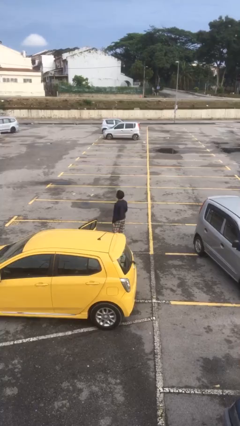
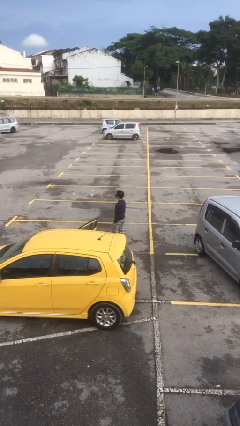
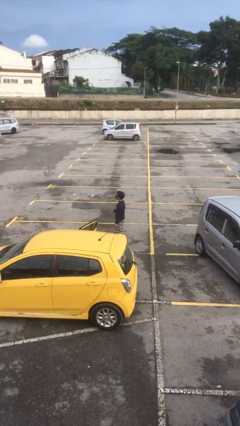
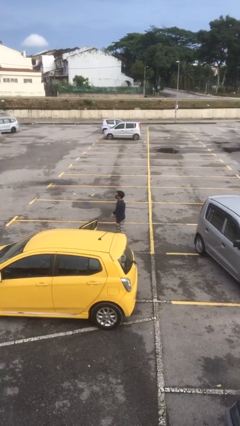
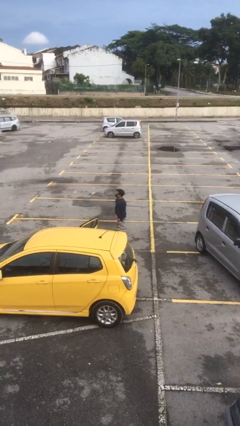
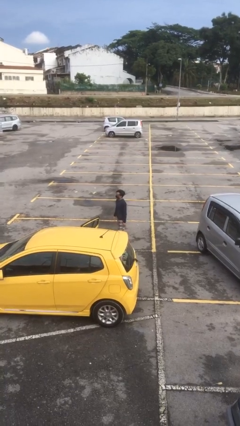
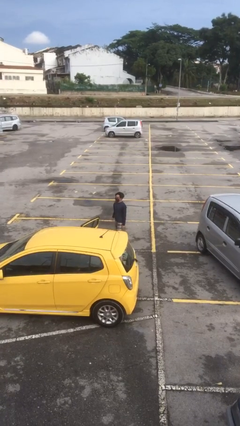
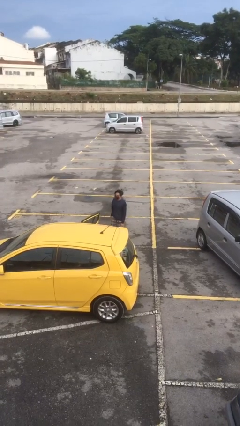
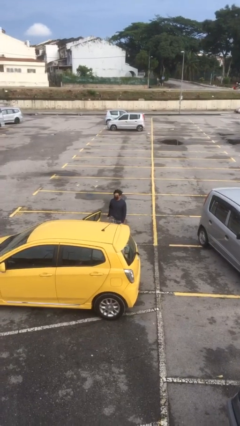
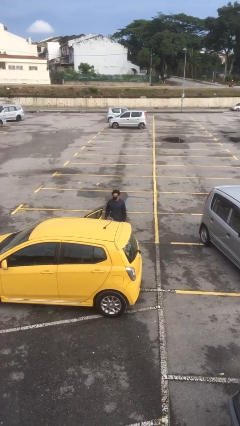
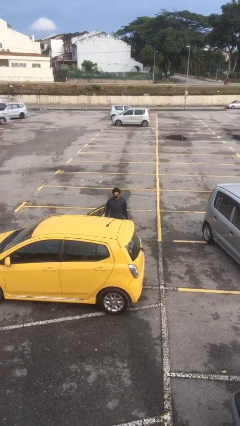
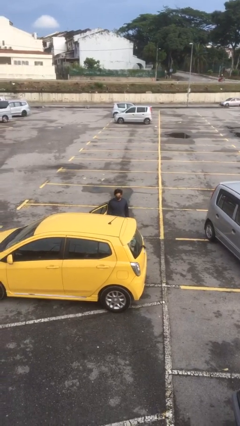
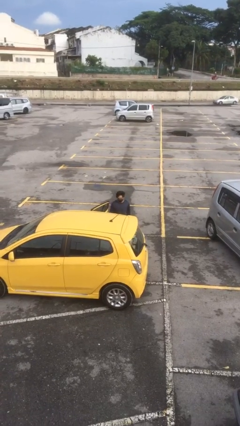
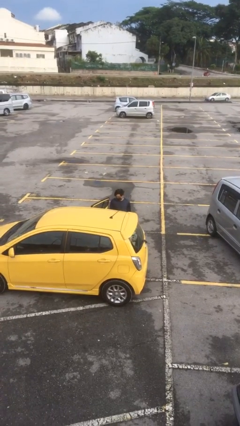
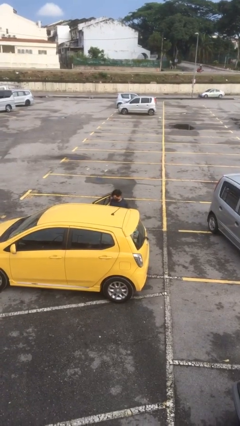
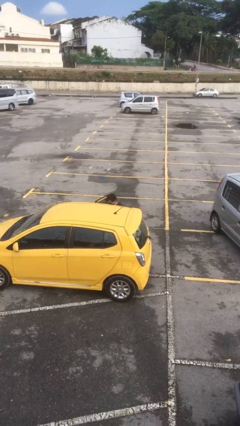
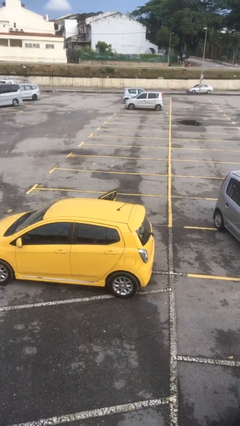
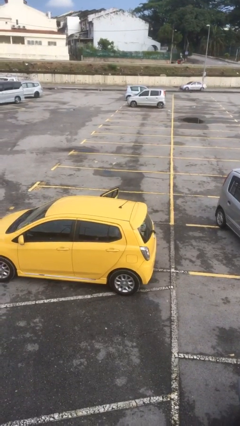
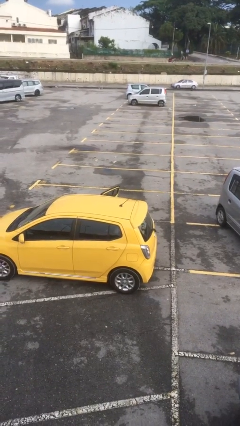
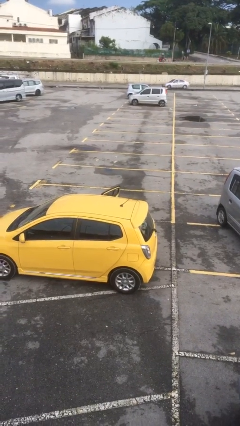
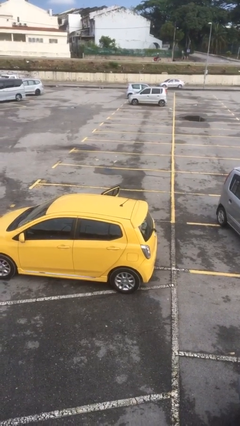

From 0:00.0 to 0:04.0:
person enters car

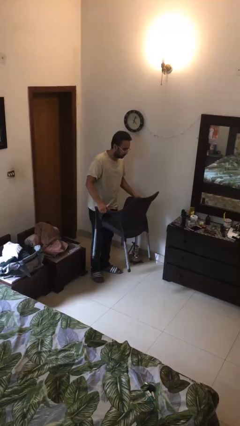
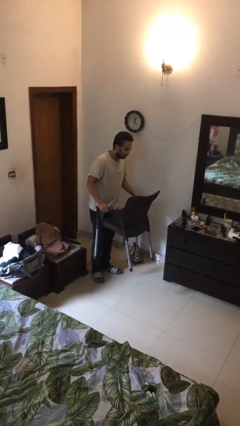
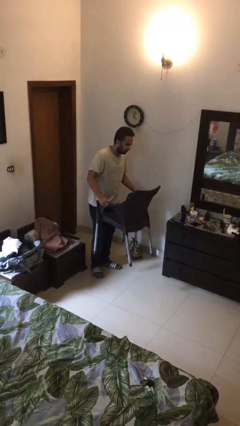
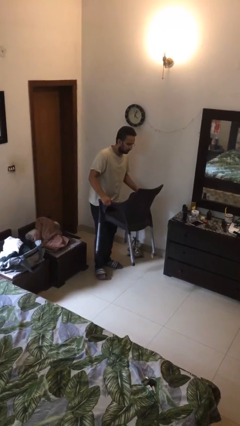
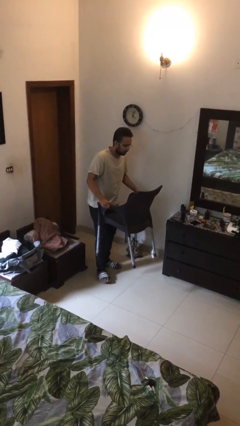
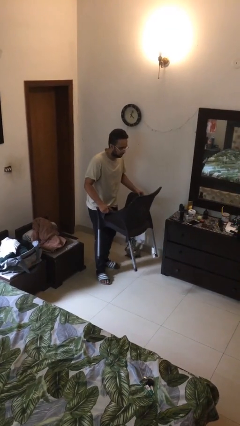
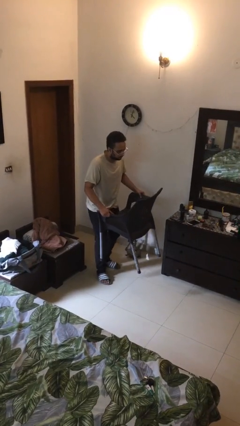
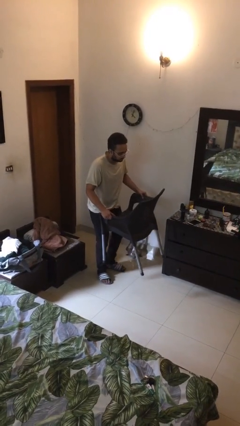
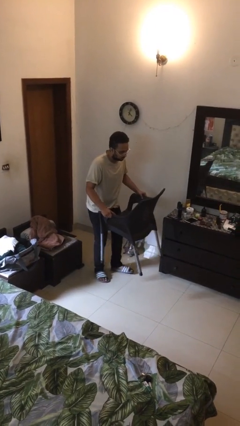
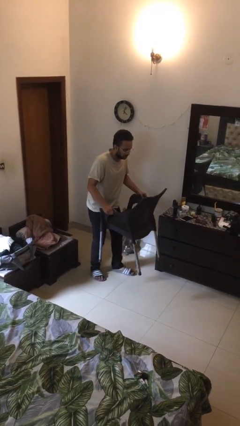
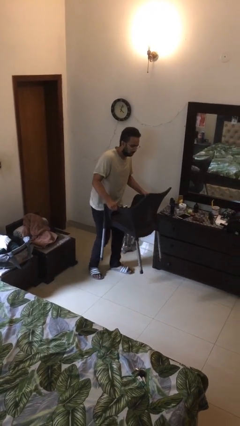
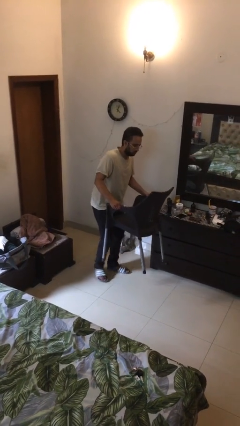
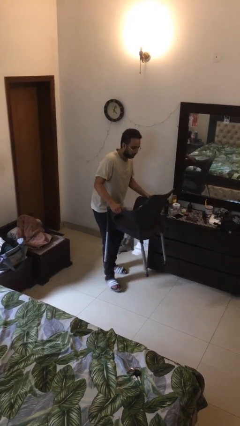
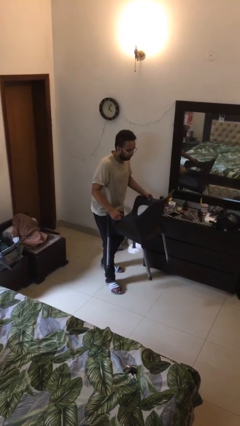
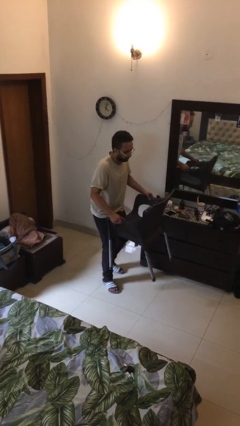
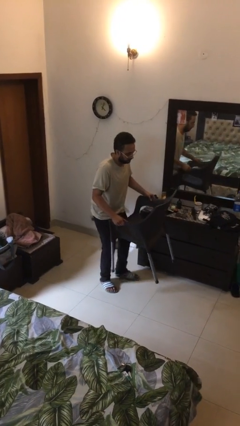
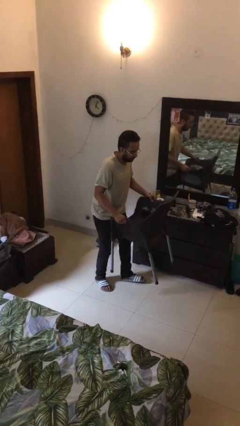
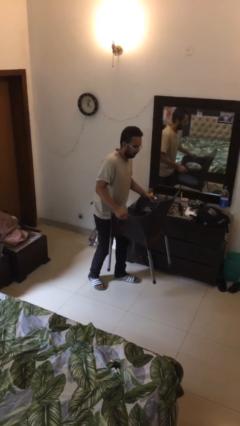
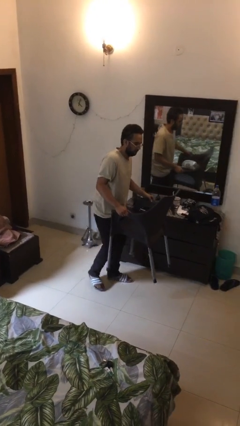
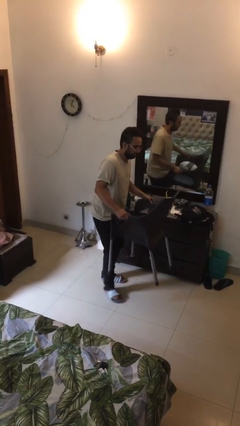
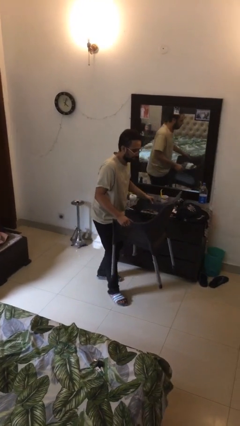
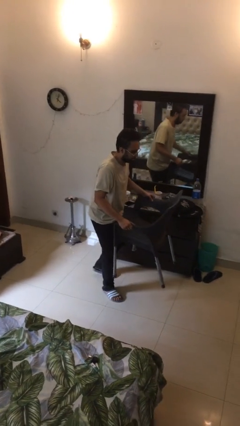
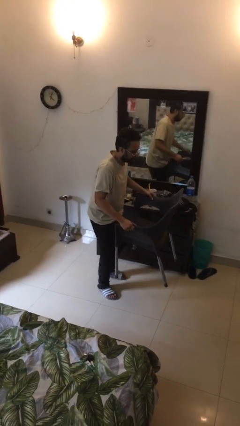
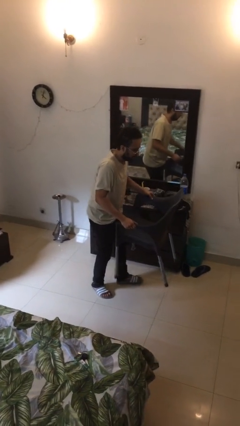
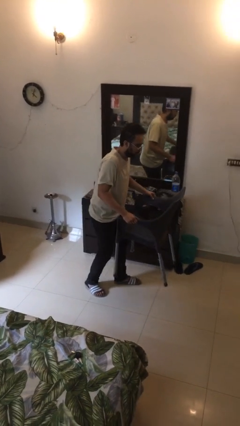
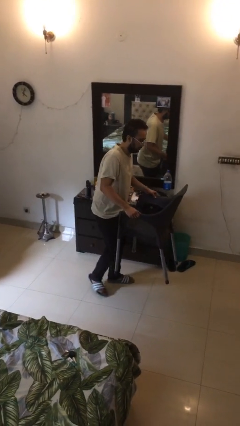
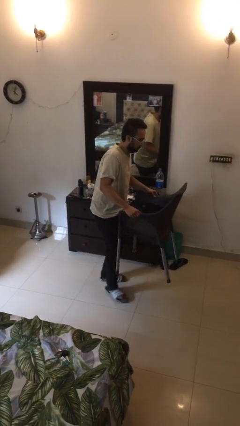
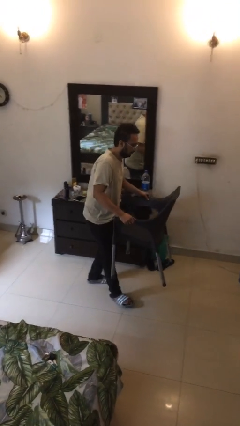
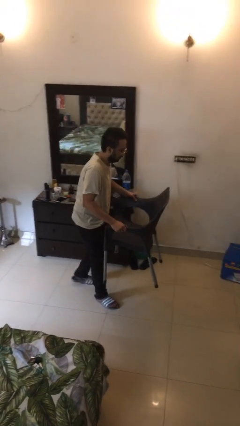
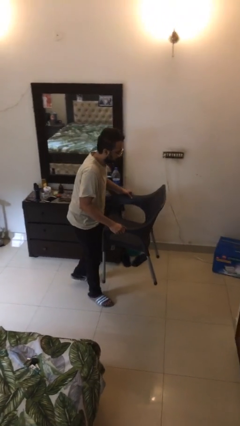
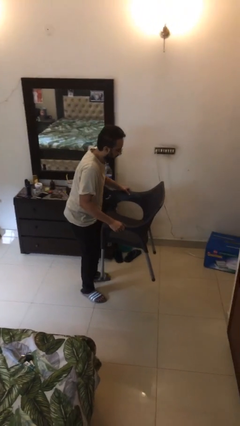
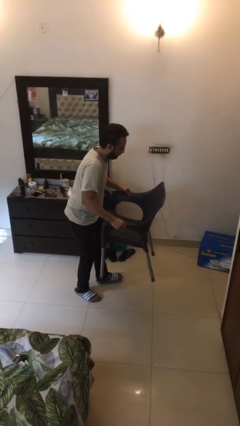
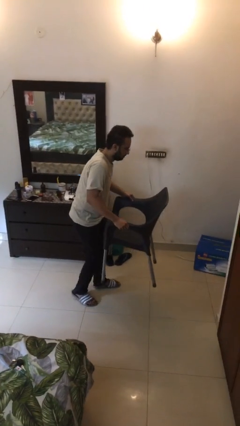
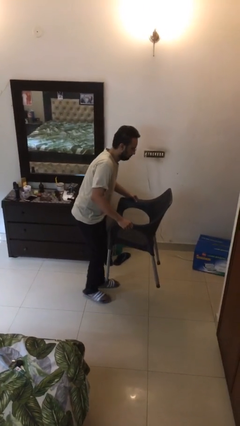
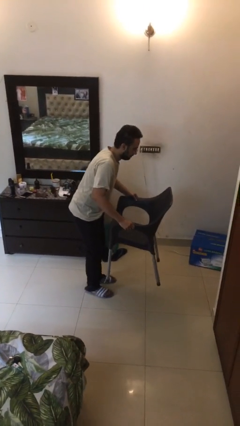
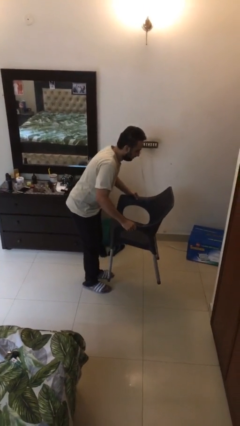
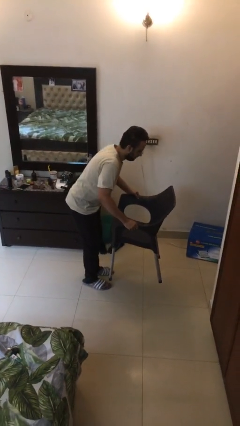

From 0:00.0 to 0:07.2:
person carries heavy object

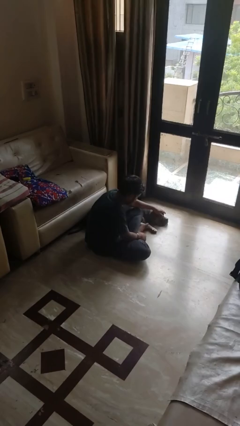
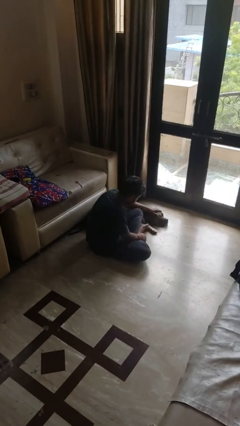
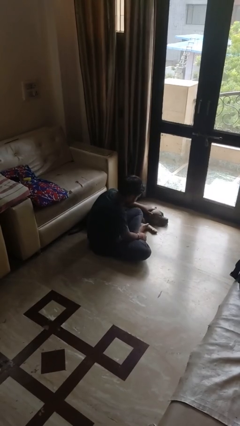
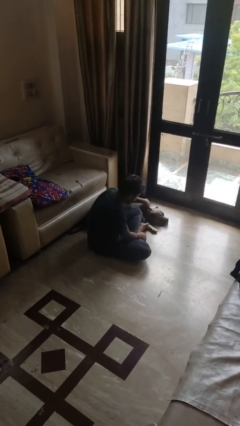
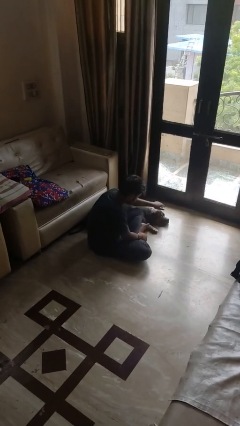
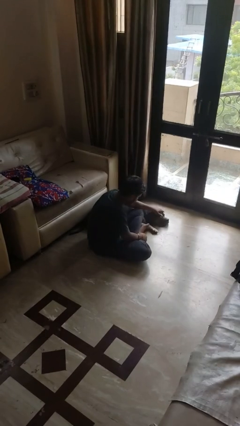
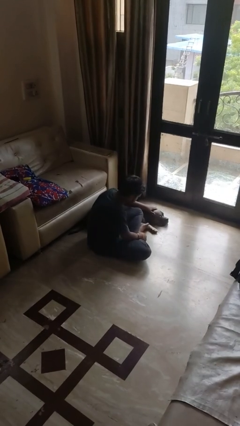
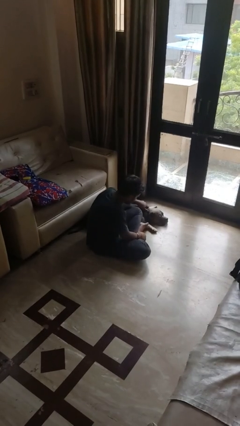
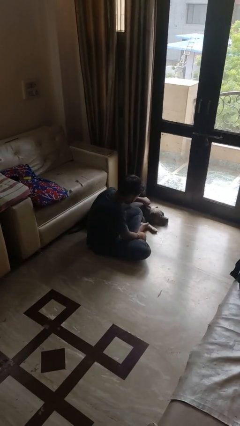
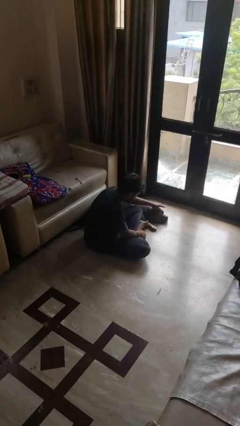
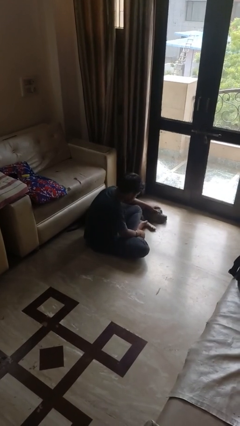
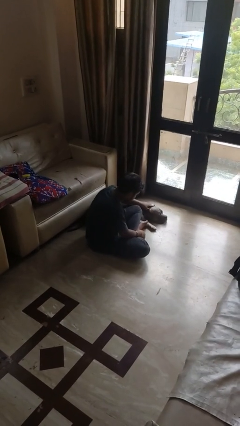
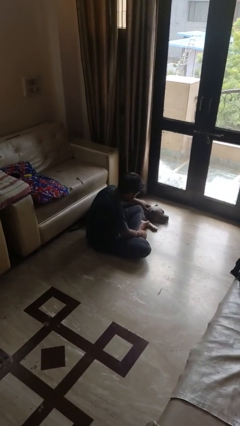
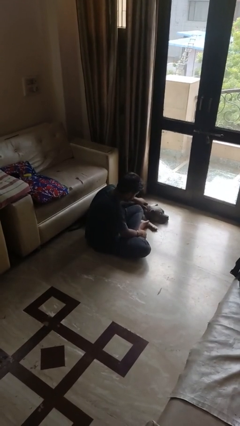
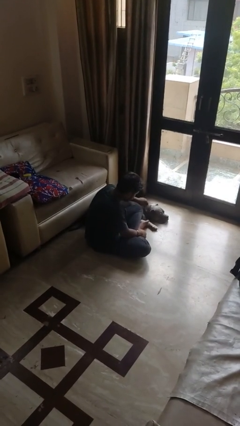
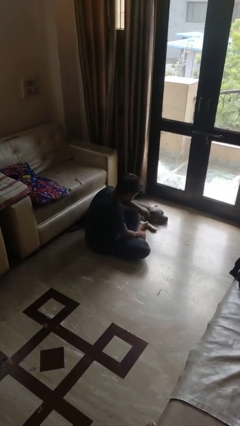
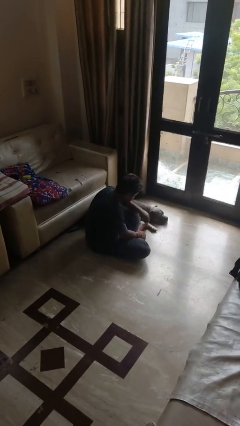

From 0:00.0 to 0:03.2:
person pets dog

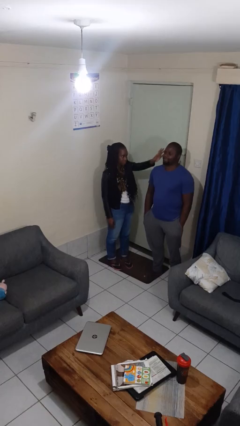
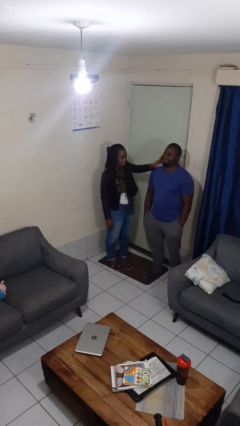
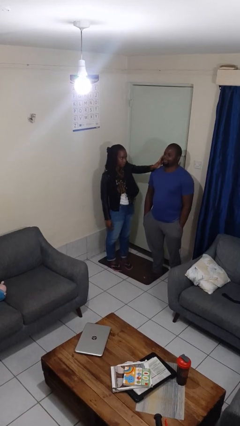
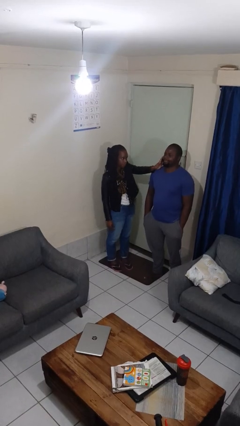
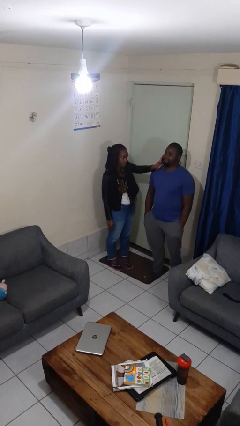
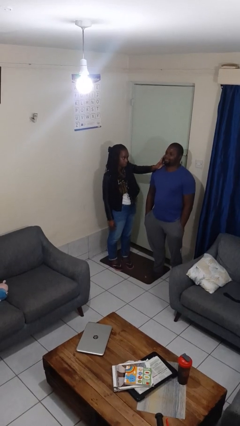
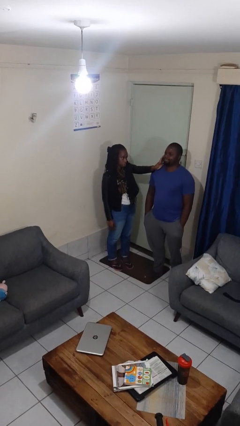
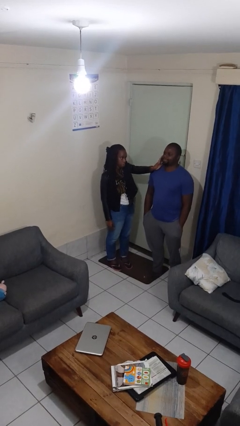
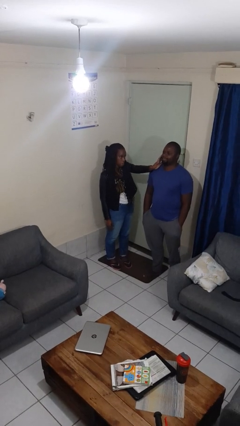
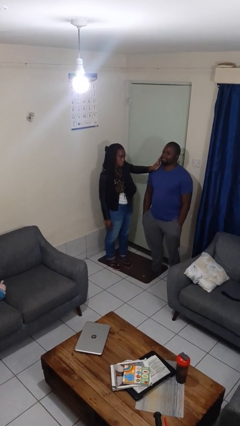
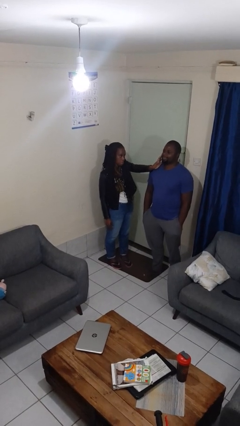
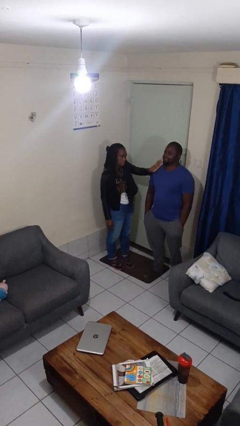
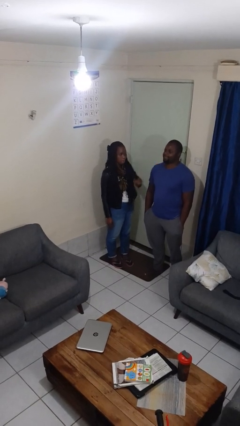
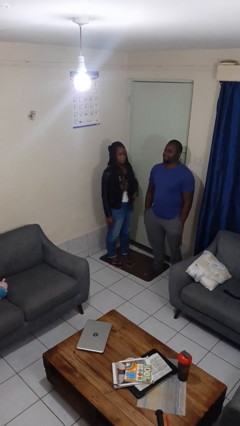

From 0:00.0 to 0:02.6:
person touches face of person

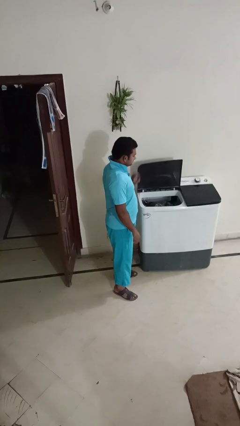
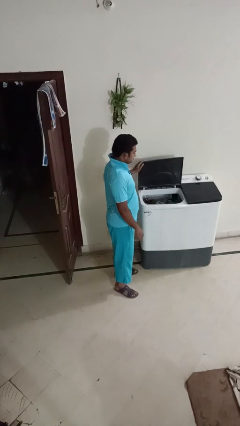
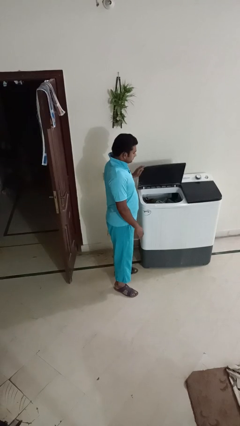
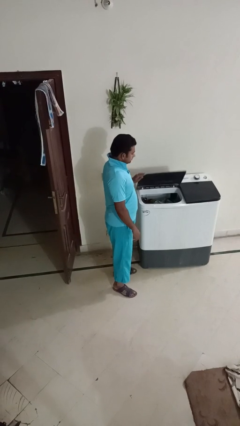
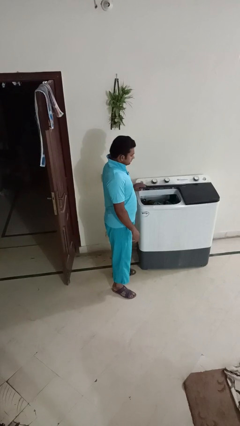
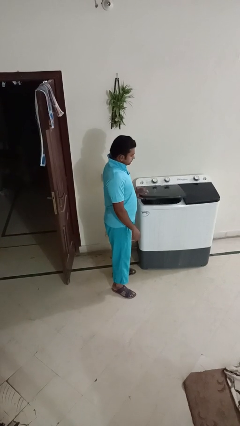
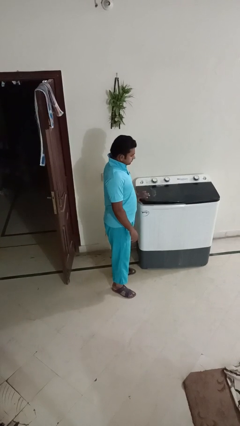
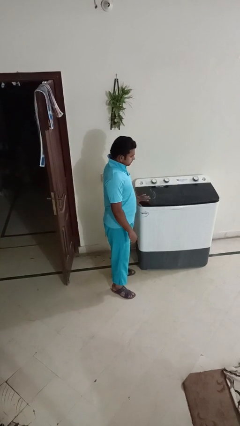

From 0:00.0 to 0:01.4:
person closes clothes washer
